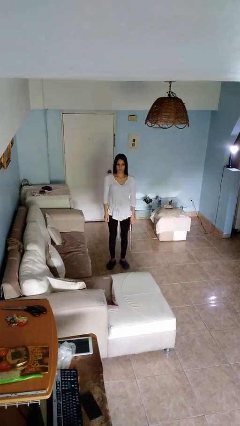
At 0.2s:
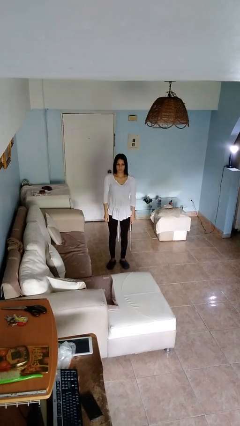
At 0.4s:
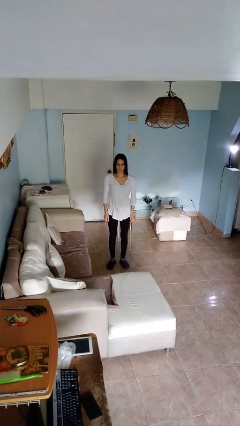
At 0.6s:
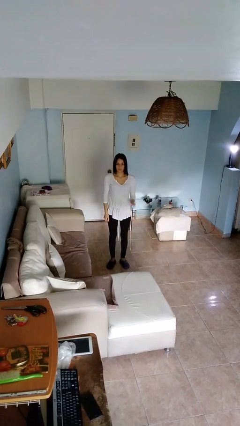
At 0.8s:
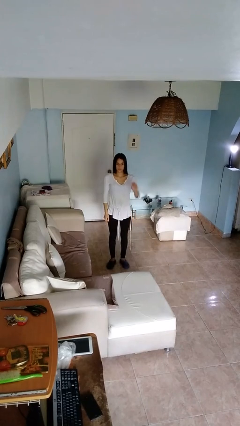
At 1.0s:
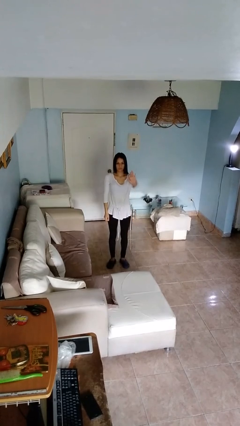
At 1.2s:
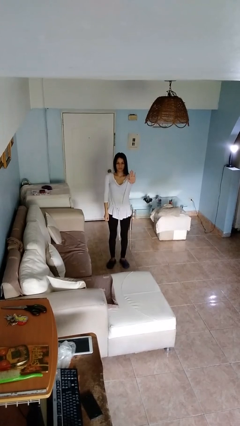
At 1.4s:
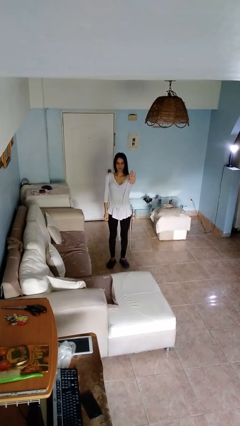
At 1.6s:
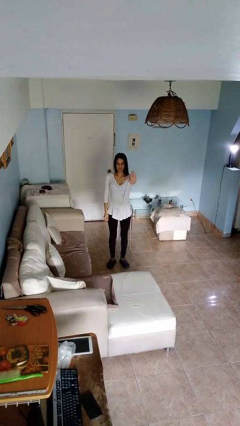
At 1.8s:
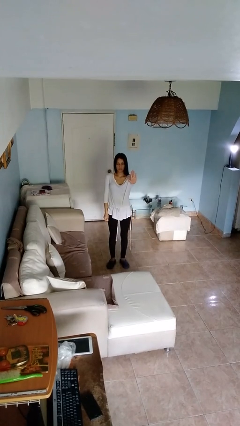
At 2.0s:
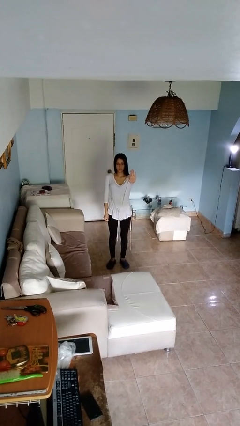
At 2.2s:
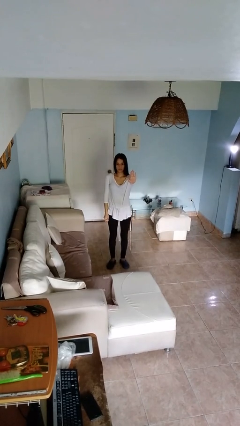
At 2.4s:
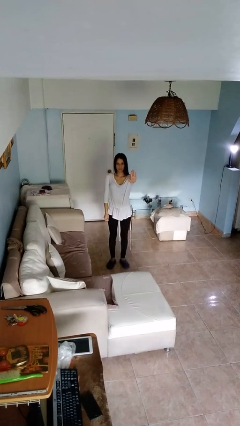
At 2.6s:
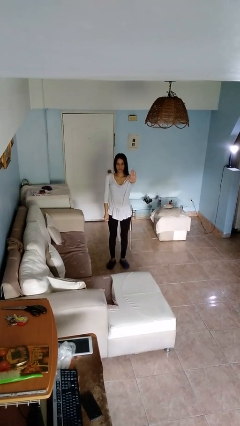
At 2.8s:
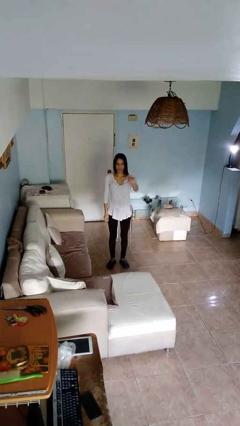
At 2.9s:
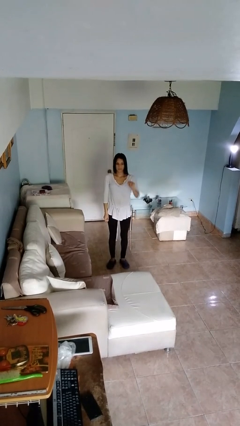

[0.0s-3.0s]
person gestures stop

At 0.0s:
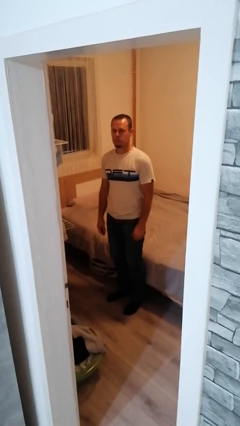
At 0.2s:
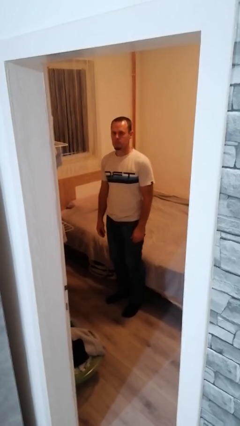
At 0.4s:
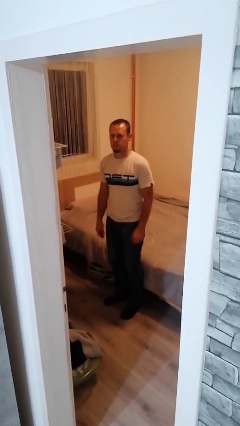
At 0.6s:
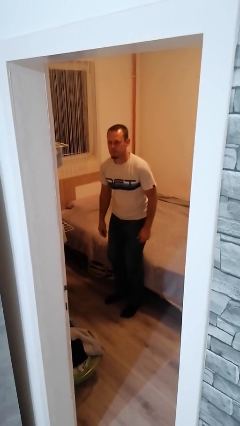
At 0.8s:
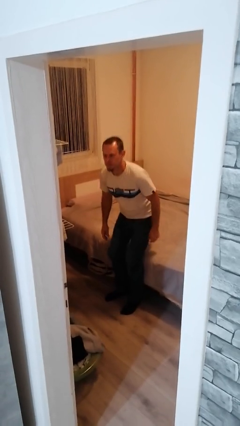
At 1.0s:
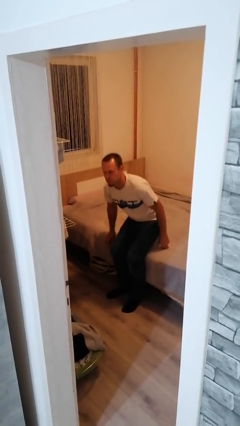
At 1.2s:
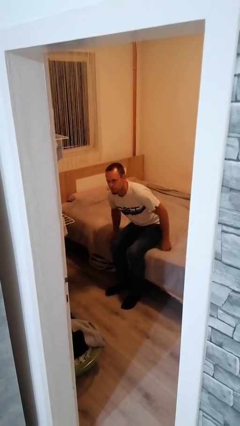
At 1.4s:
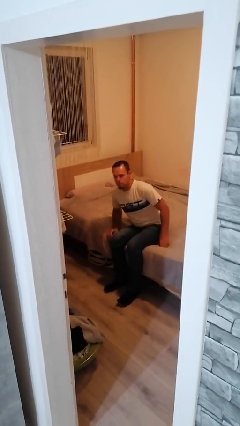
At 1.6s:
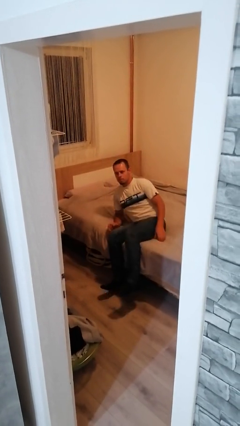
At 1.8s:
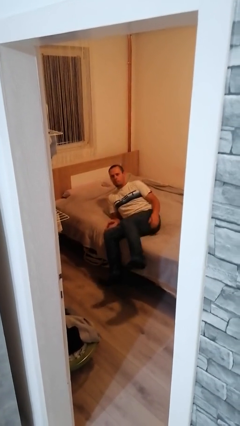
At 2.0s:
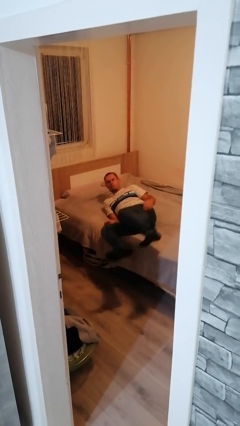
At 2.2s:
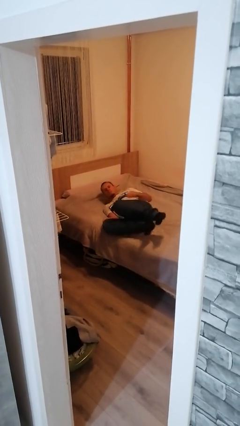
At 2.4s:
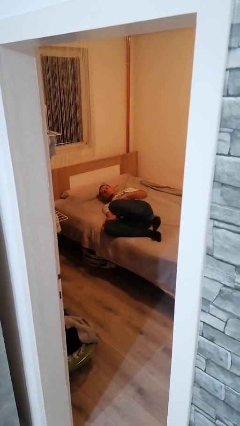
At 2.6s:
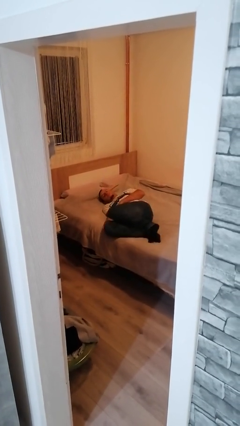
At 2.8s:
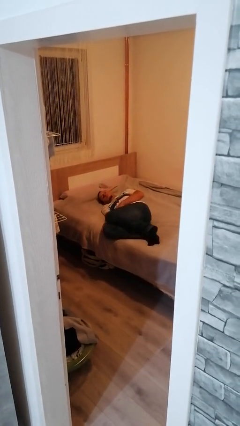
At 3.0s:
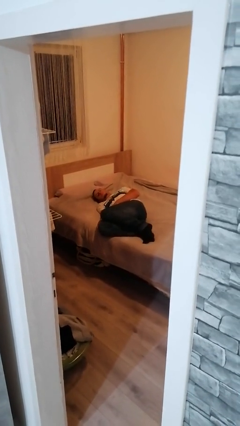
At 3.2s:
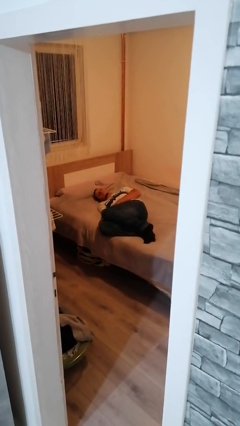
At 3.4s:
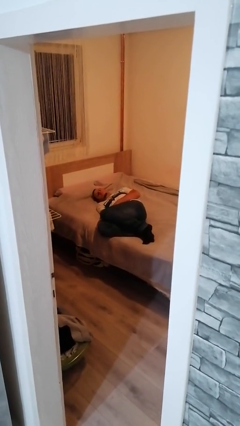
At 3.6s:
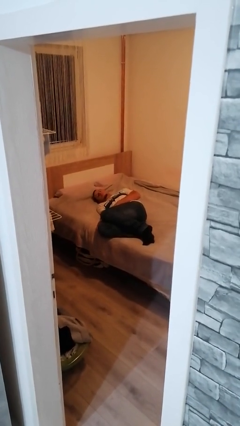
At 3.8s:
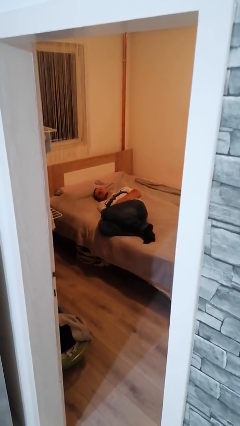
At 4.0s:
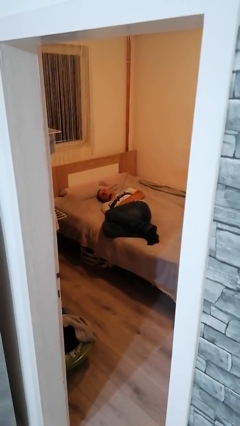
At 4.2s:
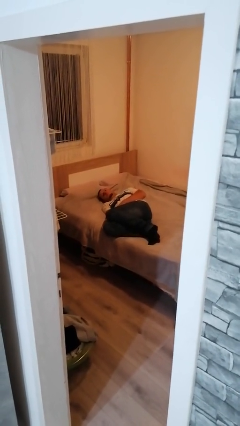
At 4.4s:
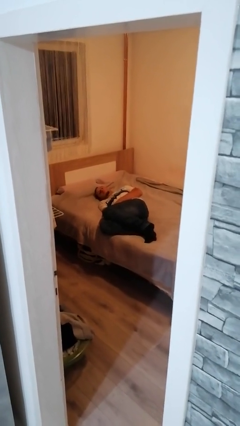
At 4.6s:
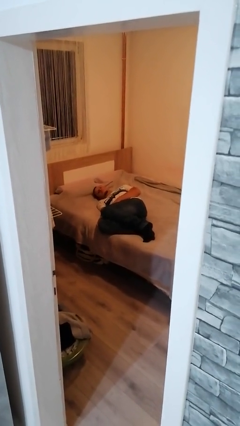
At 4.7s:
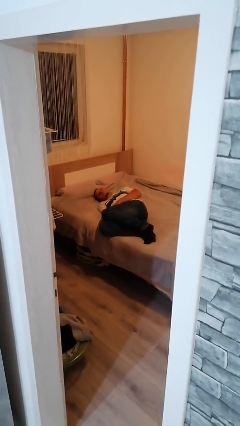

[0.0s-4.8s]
person lies down on bed

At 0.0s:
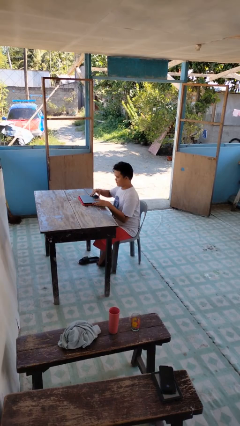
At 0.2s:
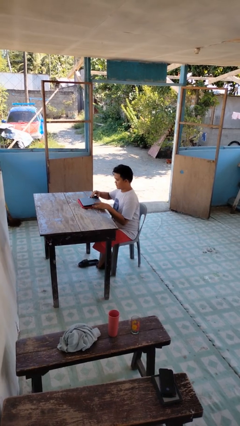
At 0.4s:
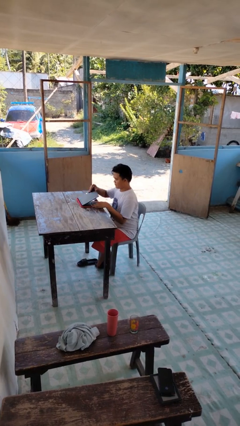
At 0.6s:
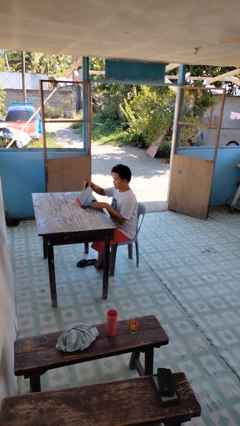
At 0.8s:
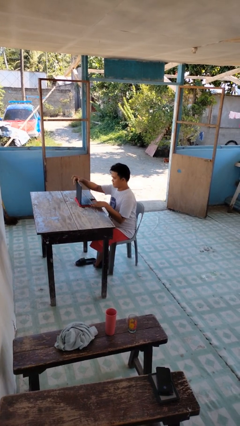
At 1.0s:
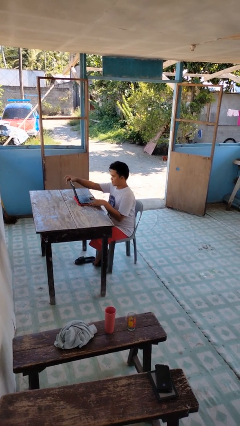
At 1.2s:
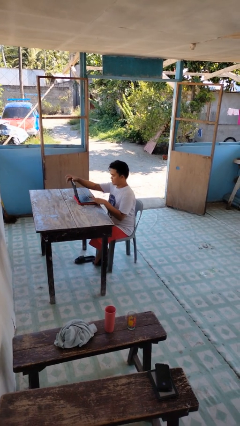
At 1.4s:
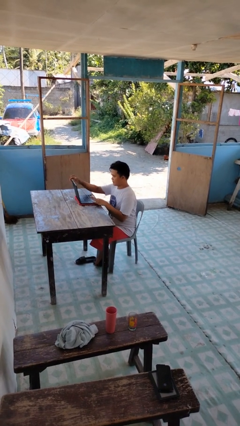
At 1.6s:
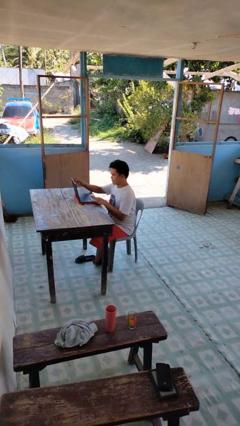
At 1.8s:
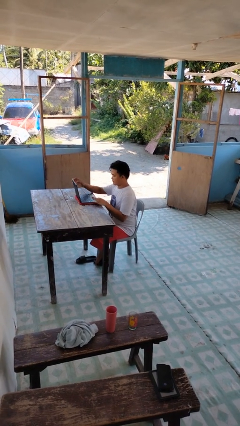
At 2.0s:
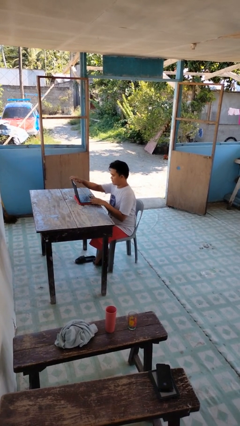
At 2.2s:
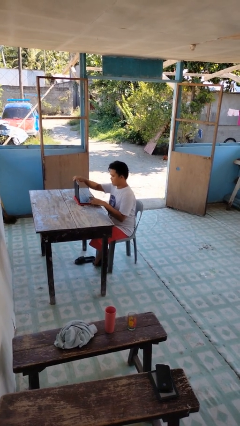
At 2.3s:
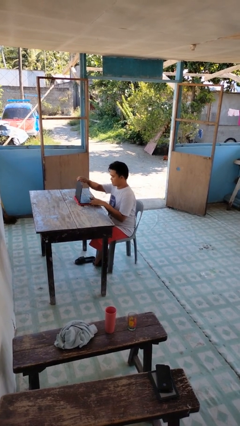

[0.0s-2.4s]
person opens laptop

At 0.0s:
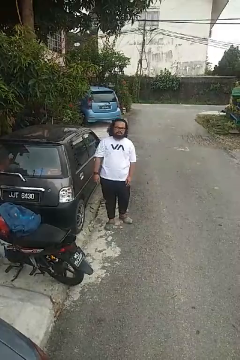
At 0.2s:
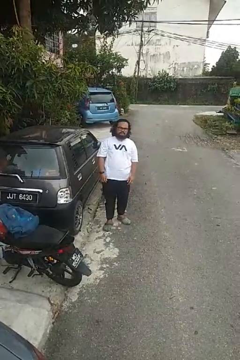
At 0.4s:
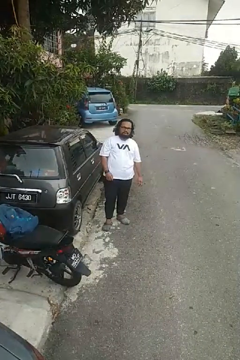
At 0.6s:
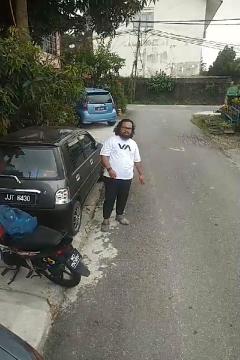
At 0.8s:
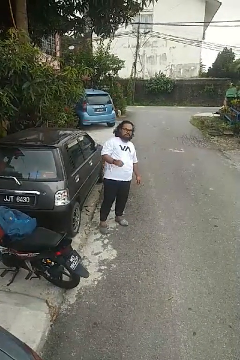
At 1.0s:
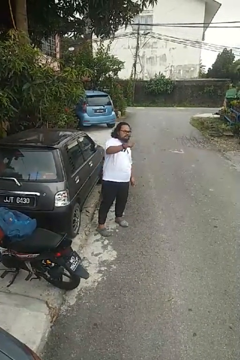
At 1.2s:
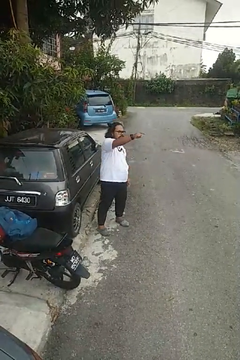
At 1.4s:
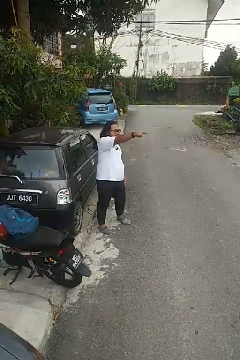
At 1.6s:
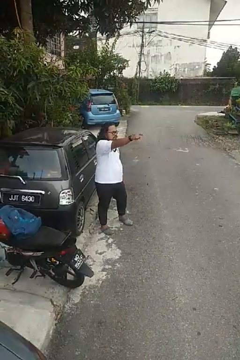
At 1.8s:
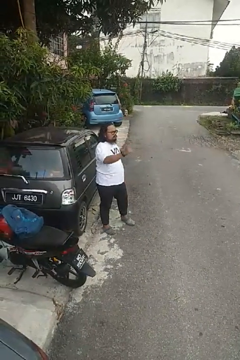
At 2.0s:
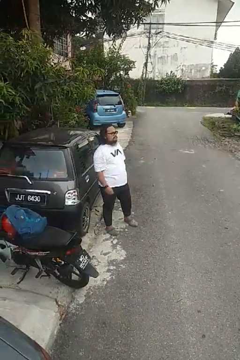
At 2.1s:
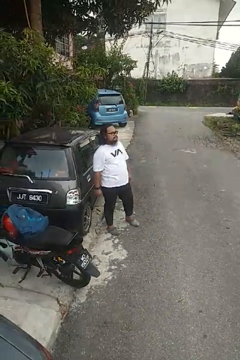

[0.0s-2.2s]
person points at person

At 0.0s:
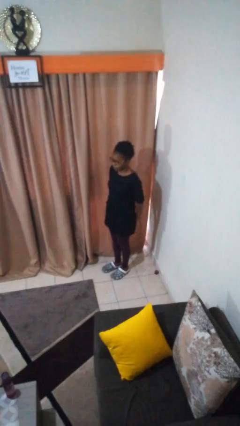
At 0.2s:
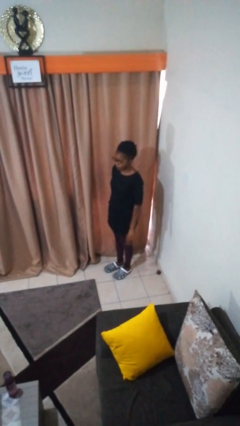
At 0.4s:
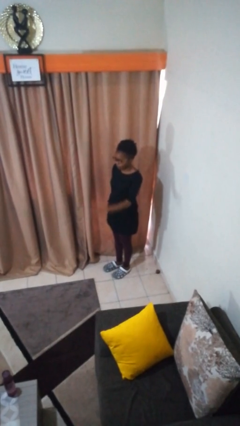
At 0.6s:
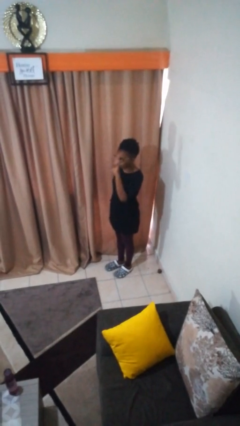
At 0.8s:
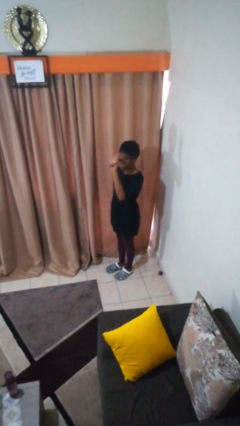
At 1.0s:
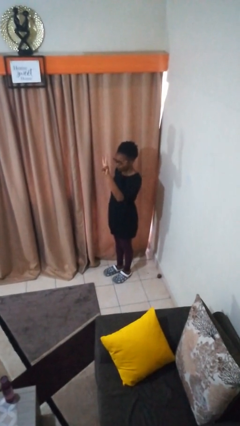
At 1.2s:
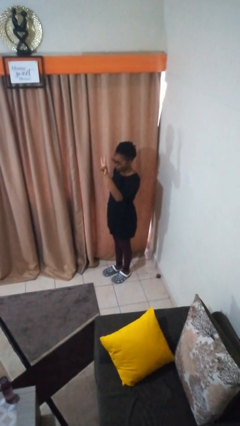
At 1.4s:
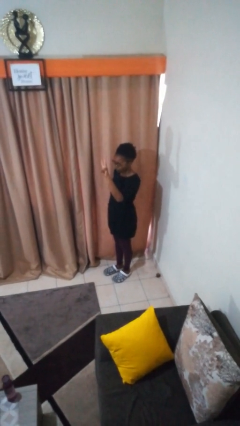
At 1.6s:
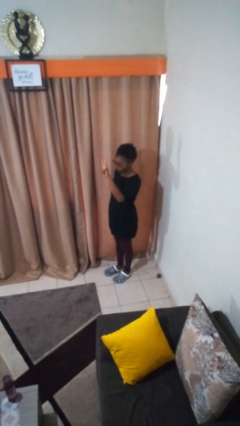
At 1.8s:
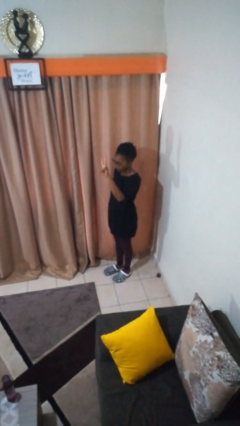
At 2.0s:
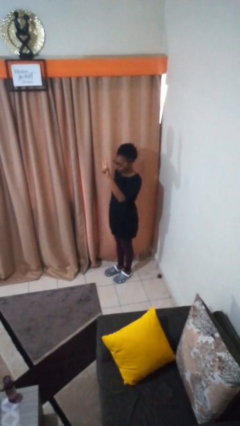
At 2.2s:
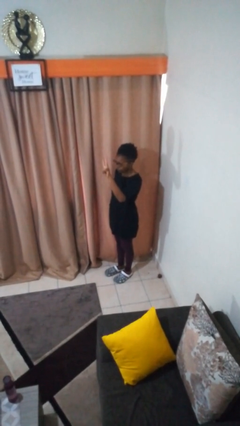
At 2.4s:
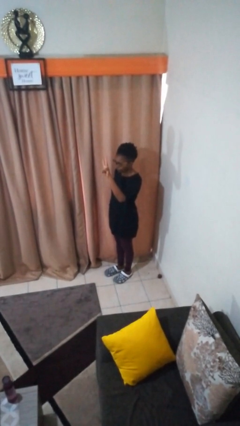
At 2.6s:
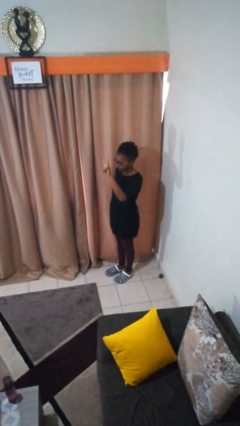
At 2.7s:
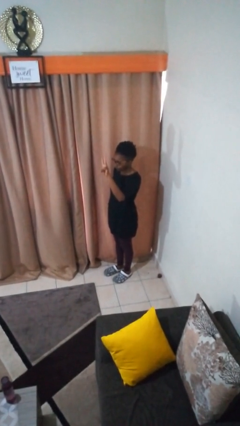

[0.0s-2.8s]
person gestures number three

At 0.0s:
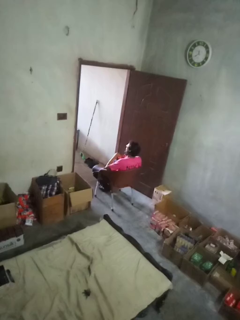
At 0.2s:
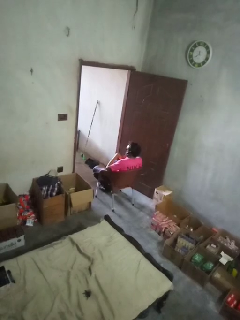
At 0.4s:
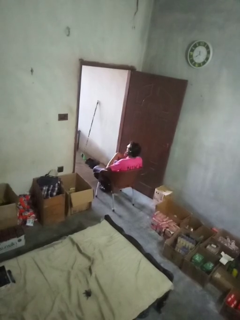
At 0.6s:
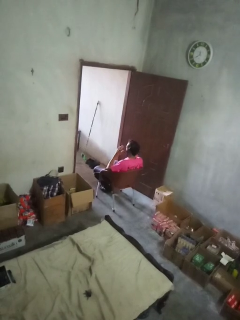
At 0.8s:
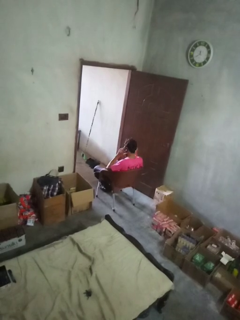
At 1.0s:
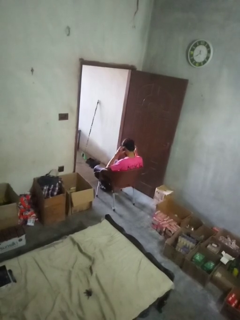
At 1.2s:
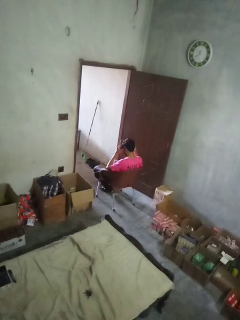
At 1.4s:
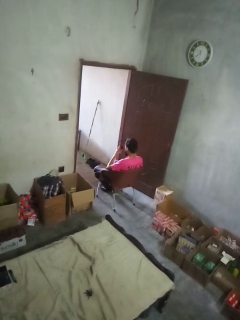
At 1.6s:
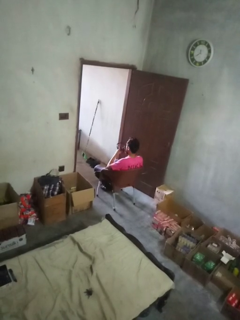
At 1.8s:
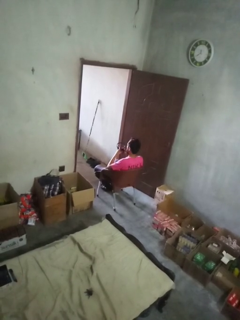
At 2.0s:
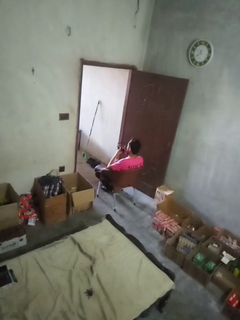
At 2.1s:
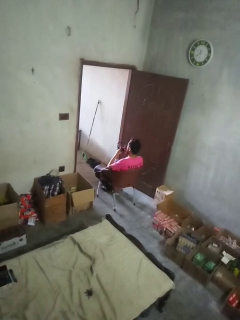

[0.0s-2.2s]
person takes off headphones

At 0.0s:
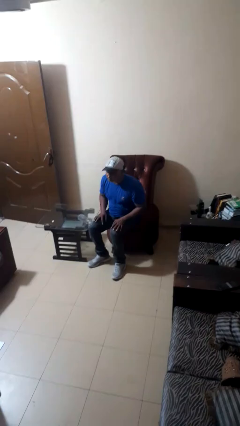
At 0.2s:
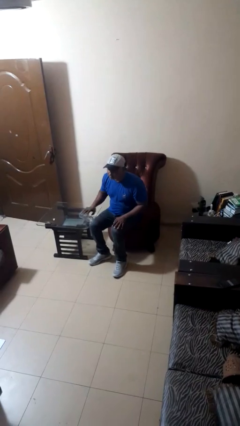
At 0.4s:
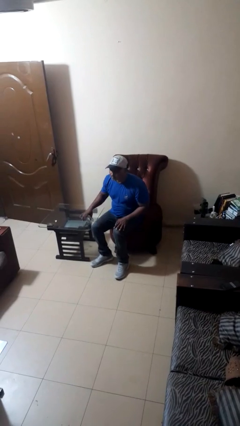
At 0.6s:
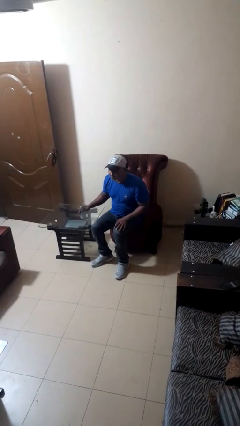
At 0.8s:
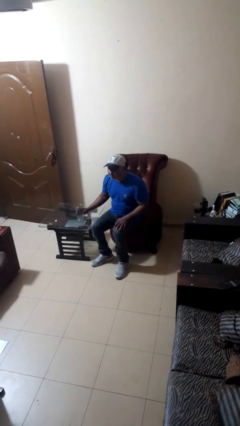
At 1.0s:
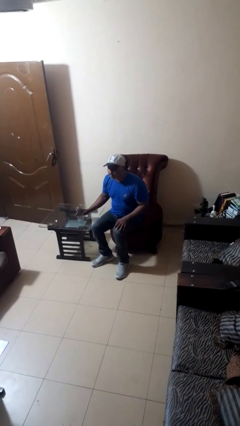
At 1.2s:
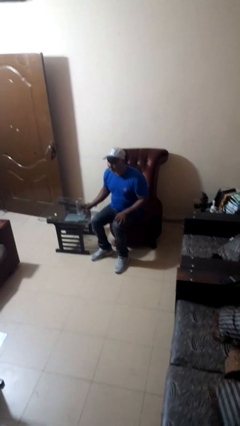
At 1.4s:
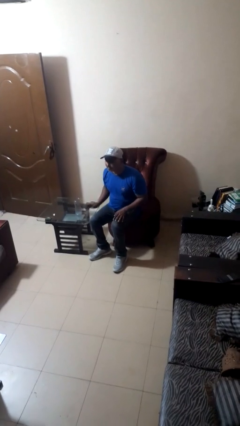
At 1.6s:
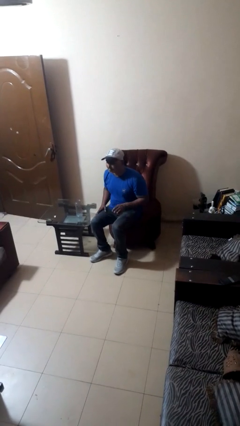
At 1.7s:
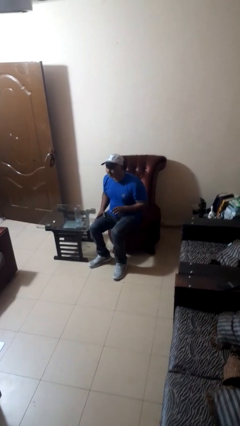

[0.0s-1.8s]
person sets upright glass
